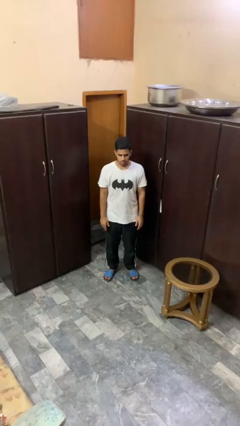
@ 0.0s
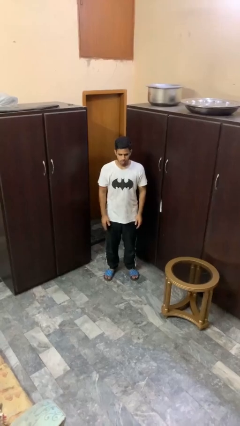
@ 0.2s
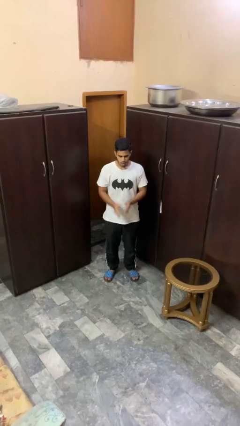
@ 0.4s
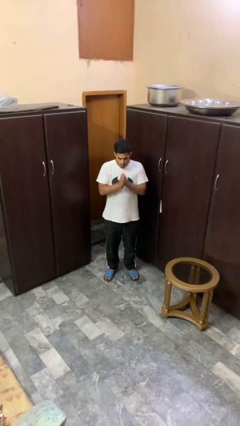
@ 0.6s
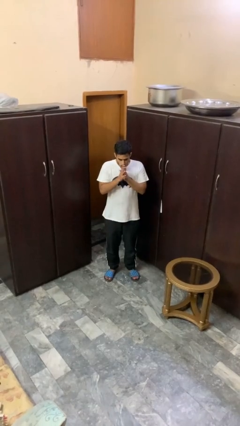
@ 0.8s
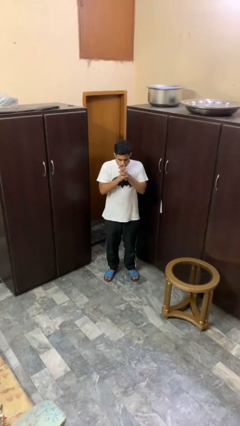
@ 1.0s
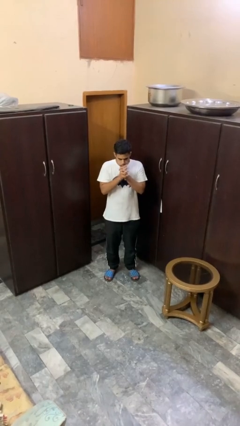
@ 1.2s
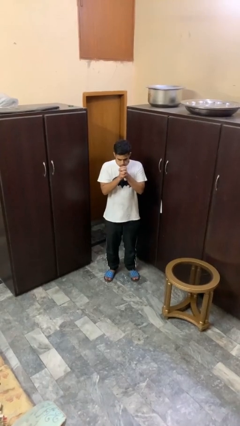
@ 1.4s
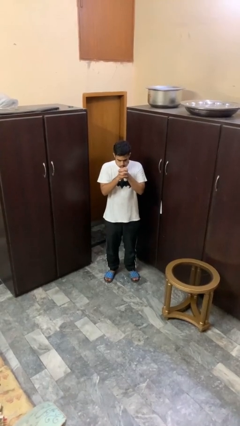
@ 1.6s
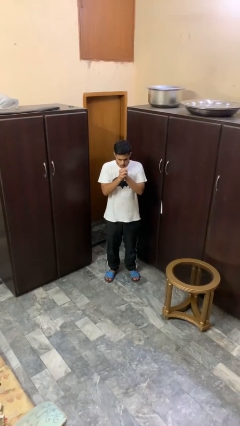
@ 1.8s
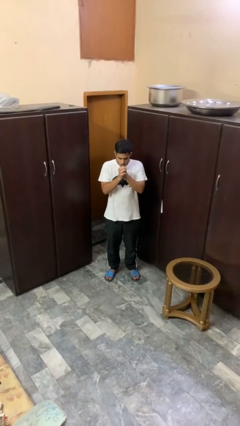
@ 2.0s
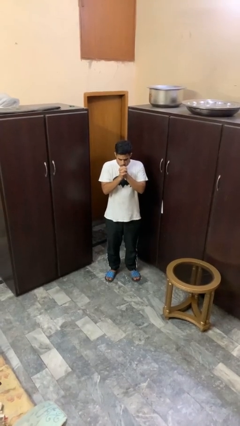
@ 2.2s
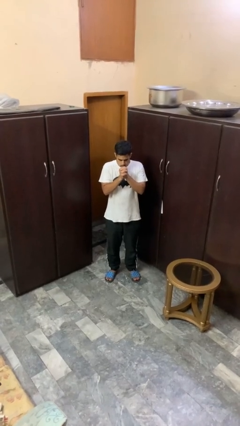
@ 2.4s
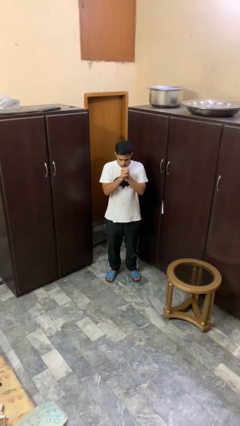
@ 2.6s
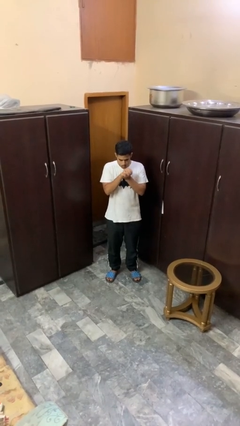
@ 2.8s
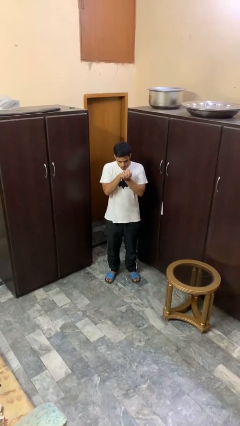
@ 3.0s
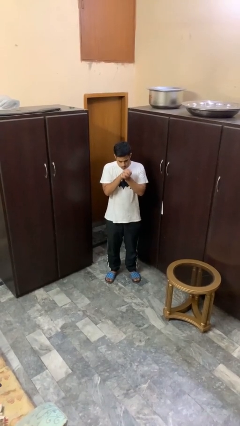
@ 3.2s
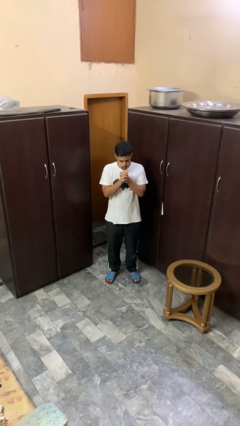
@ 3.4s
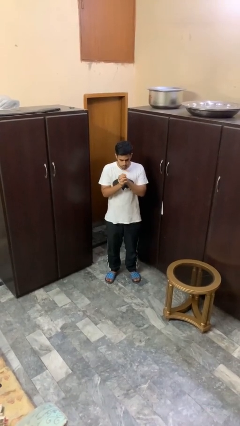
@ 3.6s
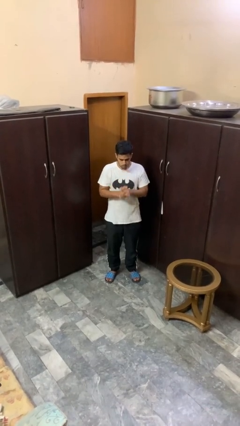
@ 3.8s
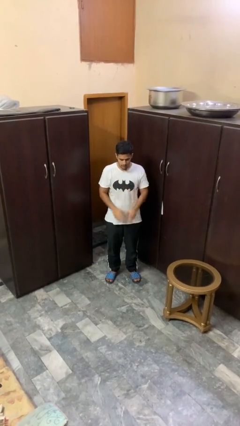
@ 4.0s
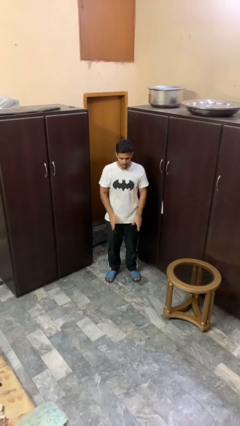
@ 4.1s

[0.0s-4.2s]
person blows into hands

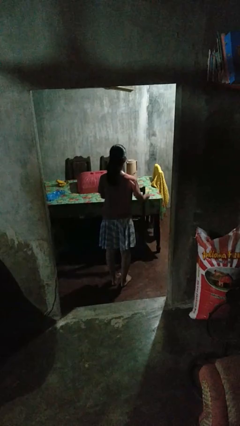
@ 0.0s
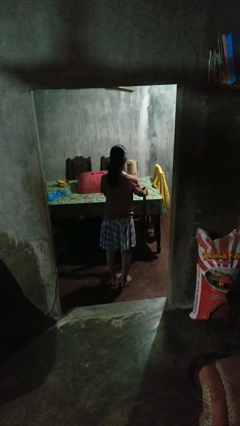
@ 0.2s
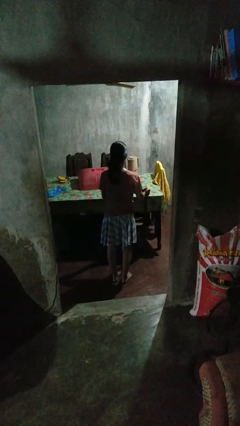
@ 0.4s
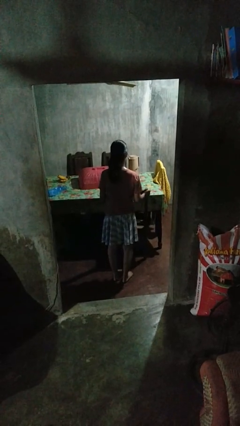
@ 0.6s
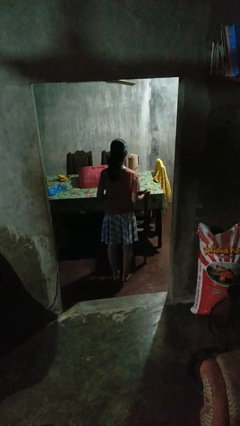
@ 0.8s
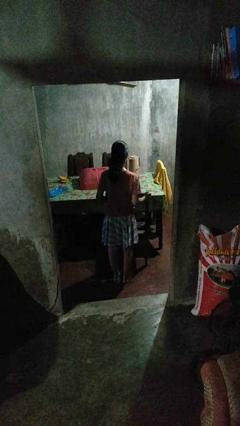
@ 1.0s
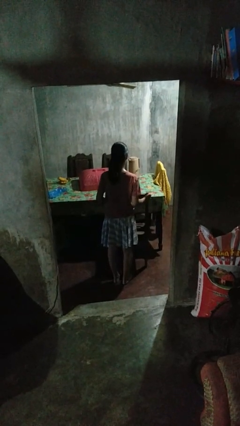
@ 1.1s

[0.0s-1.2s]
person pulls out chair

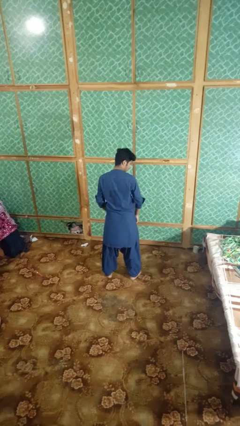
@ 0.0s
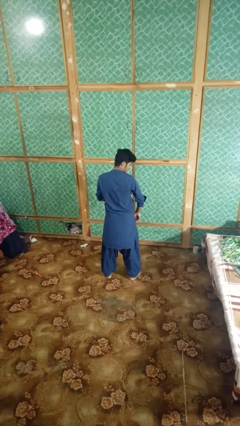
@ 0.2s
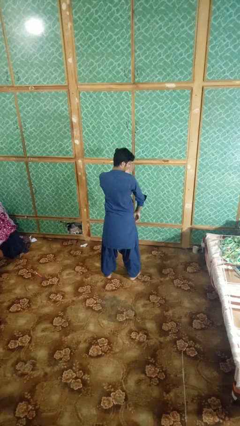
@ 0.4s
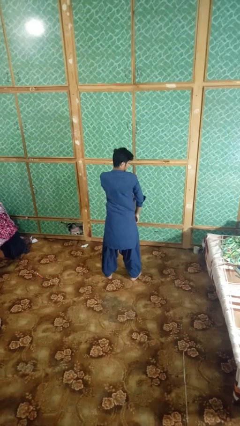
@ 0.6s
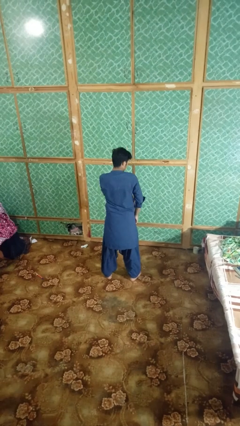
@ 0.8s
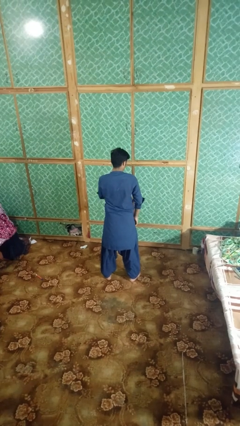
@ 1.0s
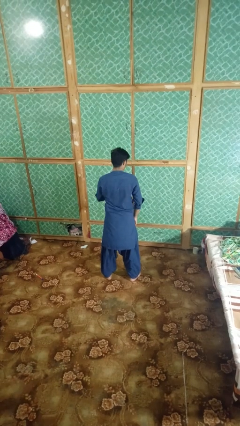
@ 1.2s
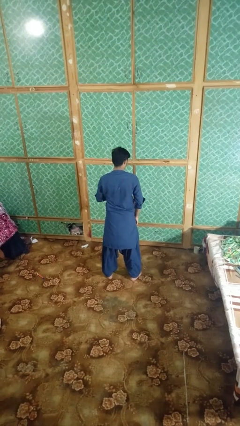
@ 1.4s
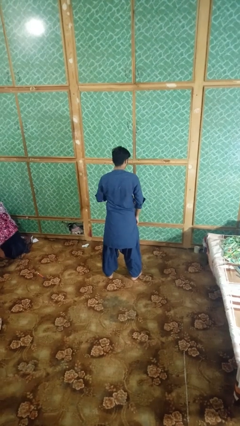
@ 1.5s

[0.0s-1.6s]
person swats bug

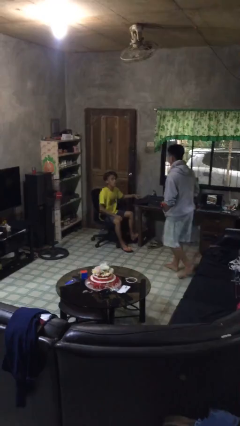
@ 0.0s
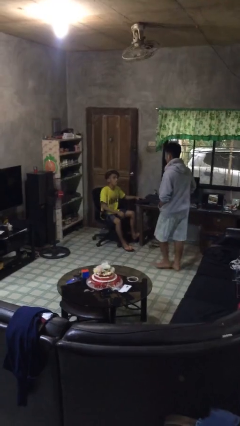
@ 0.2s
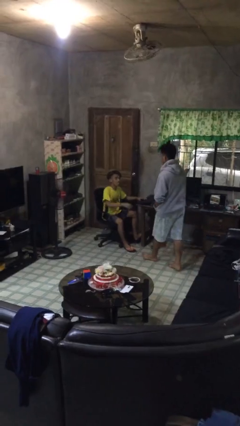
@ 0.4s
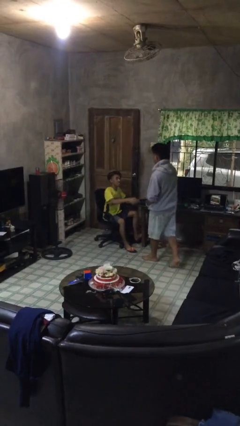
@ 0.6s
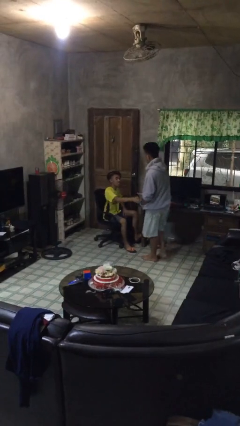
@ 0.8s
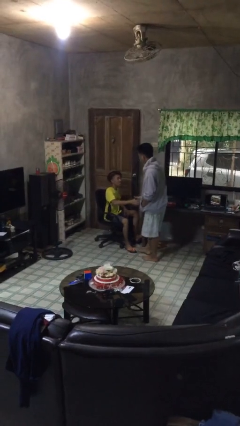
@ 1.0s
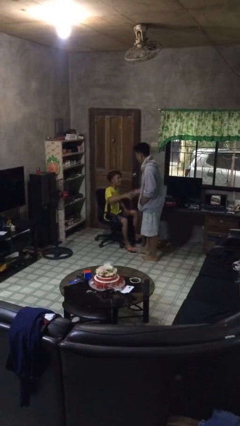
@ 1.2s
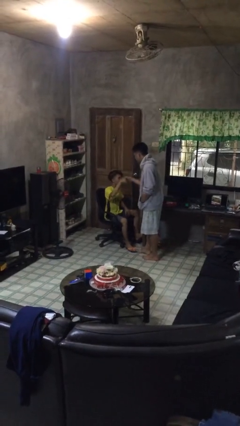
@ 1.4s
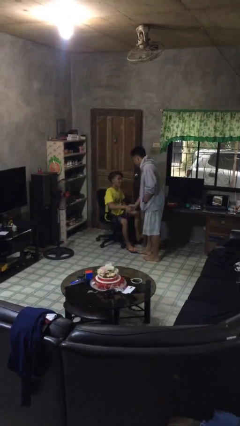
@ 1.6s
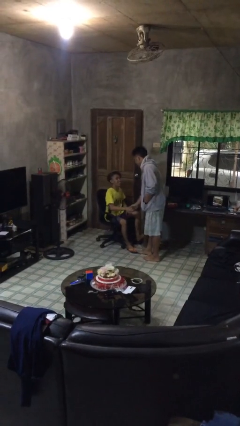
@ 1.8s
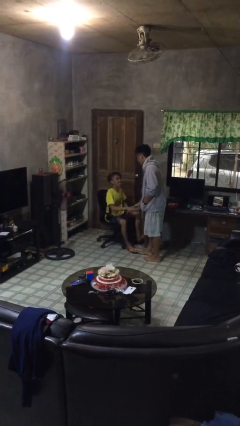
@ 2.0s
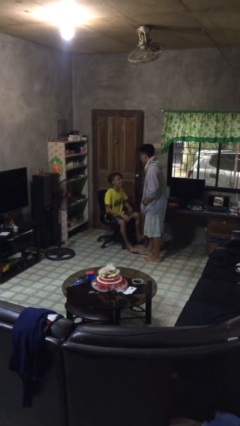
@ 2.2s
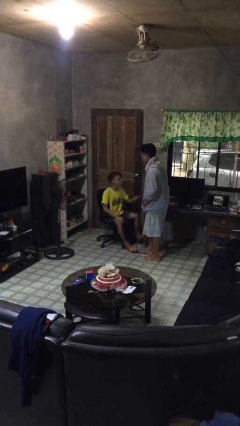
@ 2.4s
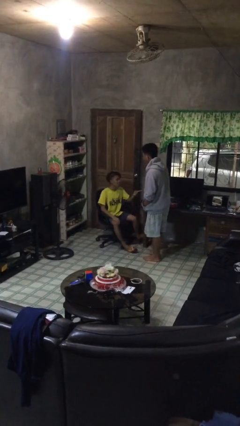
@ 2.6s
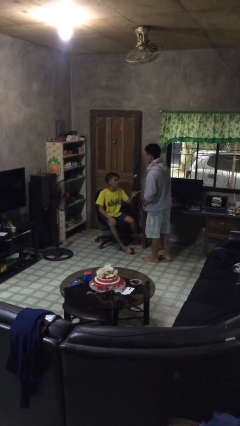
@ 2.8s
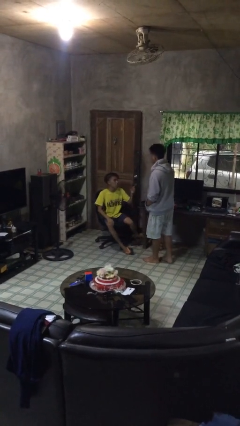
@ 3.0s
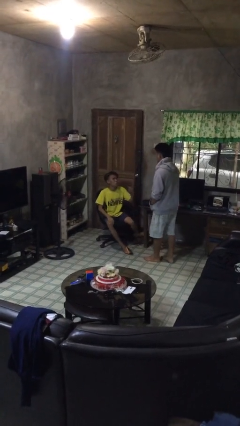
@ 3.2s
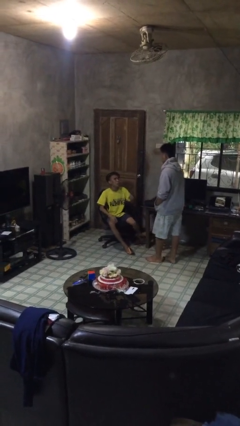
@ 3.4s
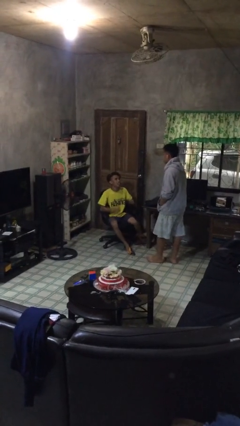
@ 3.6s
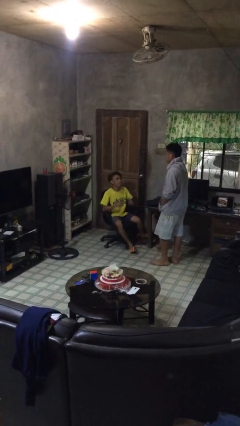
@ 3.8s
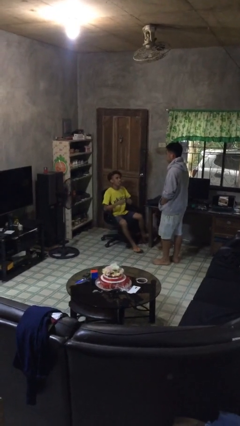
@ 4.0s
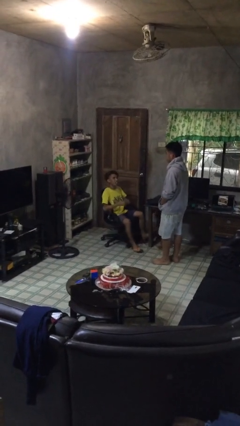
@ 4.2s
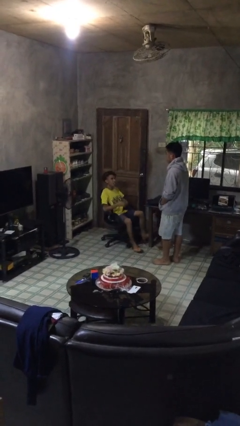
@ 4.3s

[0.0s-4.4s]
person shakes hand

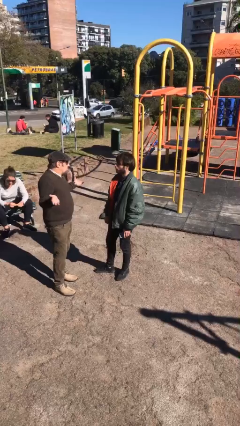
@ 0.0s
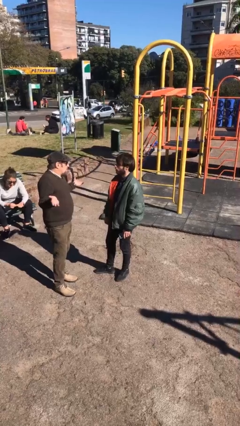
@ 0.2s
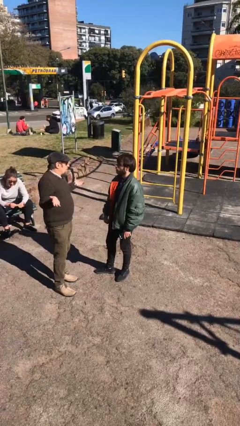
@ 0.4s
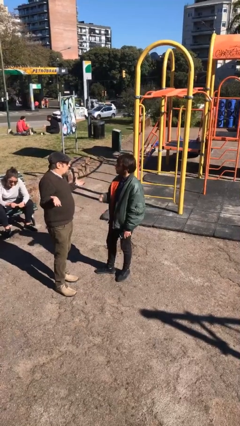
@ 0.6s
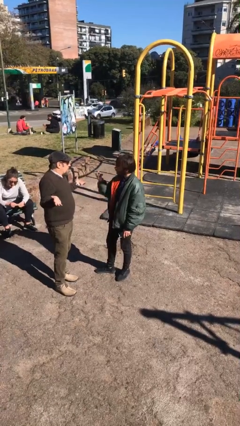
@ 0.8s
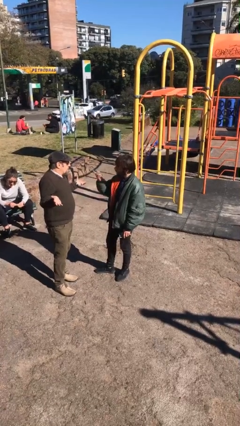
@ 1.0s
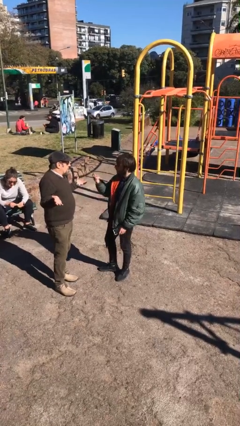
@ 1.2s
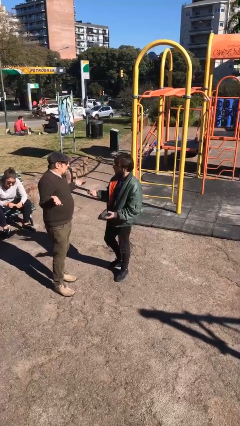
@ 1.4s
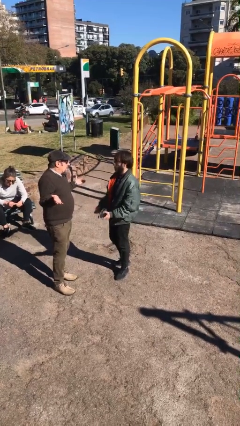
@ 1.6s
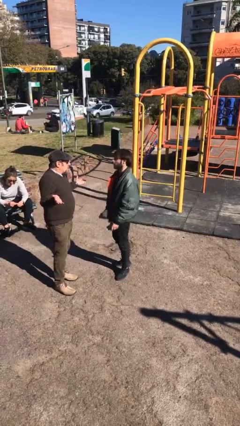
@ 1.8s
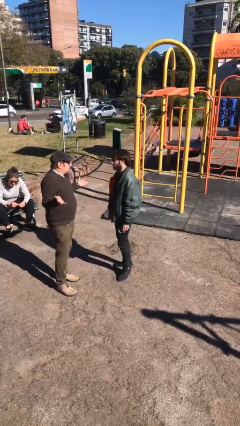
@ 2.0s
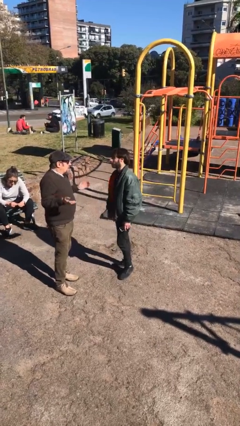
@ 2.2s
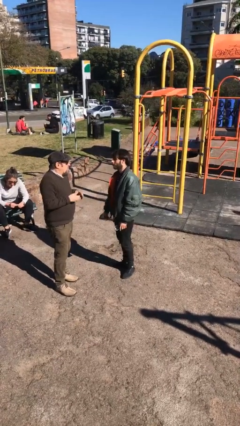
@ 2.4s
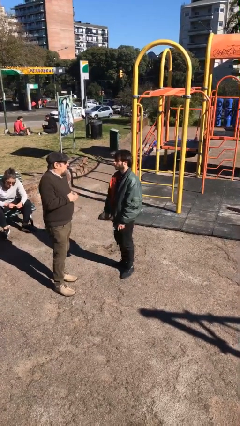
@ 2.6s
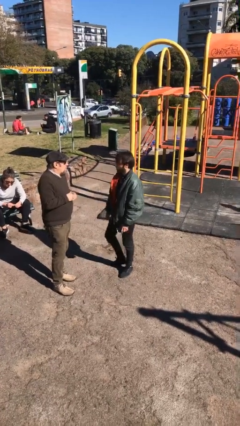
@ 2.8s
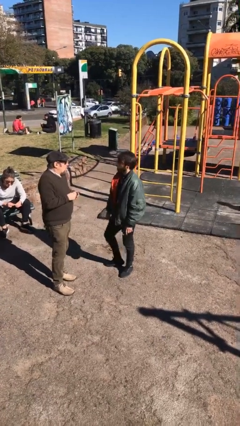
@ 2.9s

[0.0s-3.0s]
person talks to person

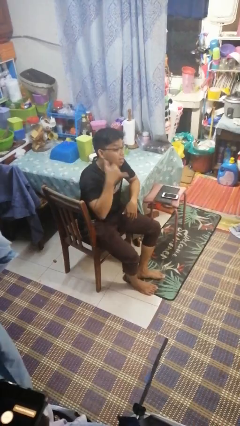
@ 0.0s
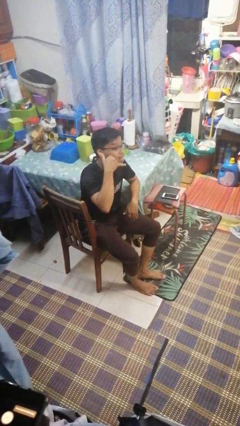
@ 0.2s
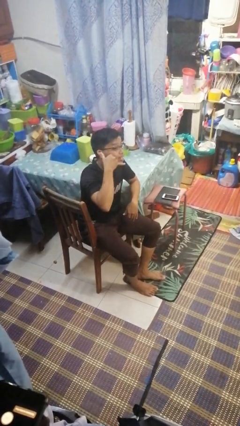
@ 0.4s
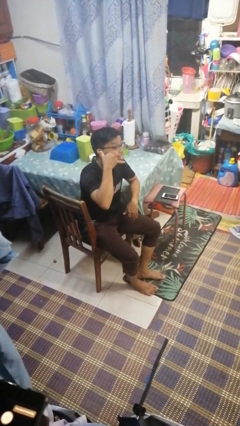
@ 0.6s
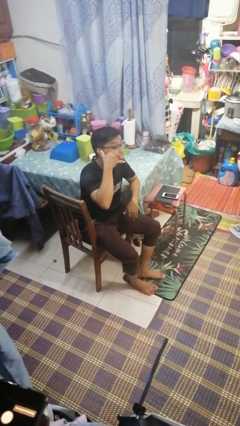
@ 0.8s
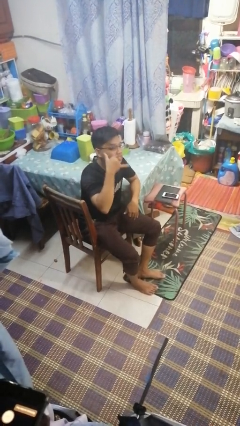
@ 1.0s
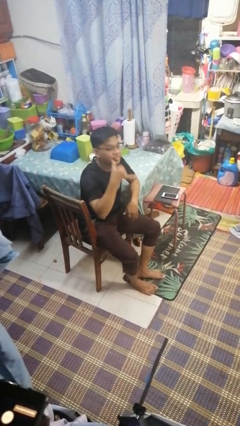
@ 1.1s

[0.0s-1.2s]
person gestures call me

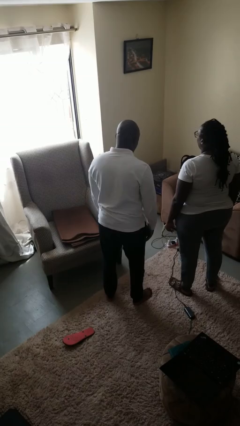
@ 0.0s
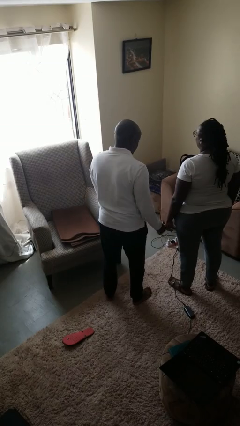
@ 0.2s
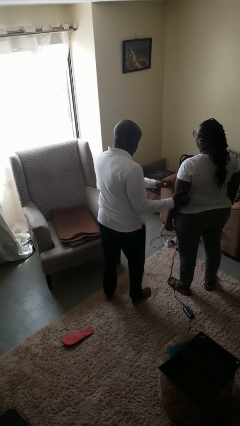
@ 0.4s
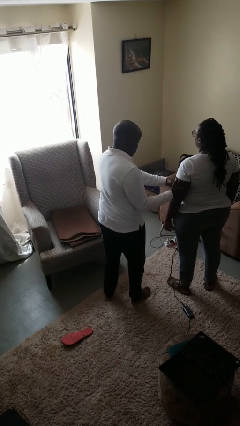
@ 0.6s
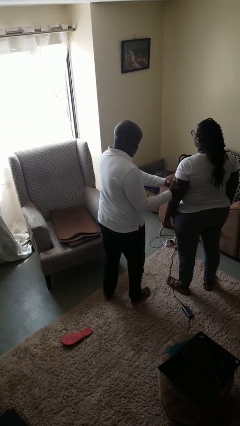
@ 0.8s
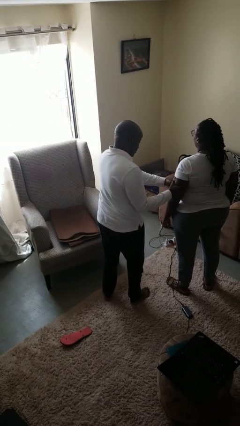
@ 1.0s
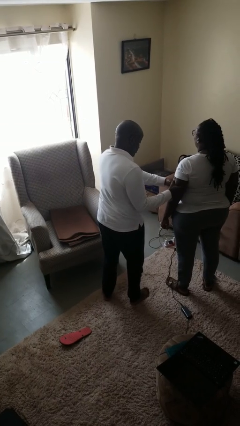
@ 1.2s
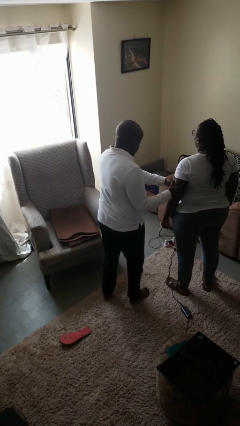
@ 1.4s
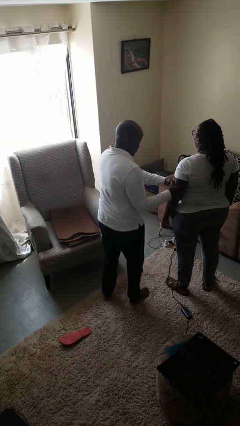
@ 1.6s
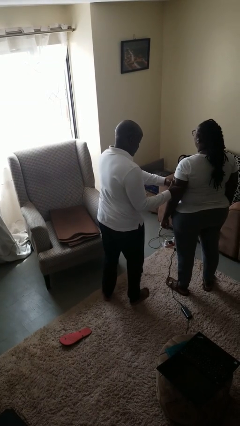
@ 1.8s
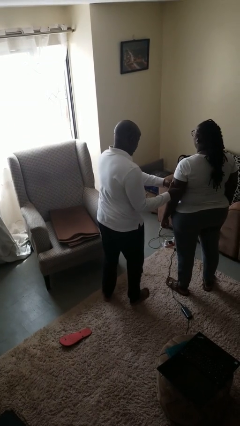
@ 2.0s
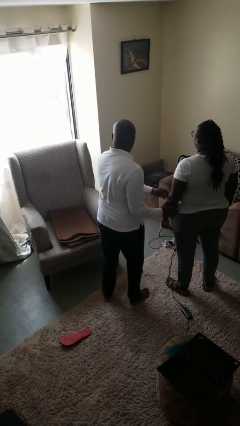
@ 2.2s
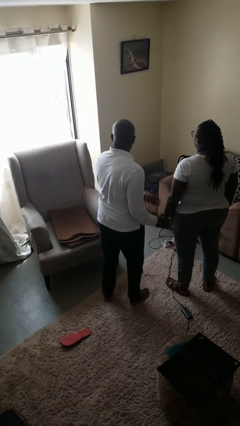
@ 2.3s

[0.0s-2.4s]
person grabs person by bicep
